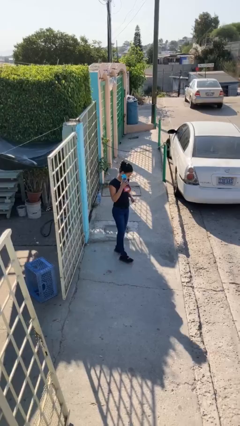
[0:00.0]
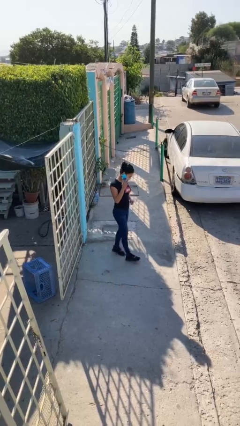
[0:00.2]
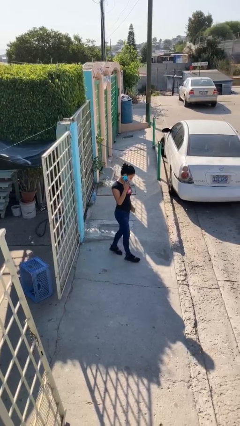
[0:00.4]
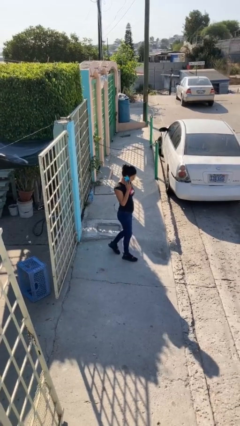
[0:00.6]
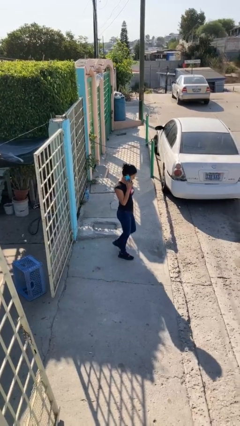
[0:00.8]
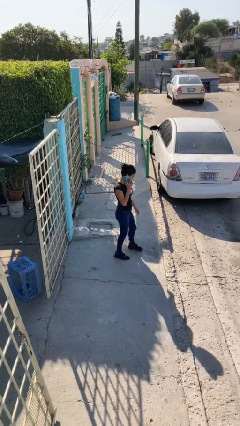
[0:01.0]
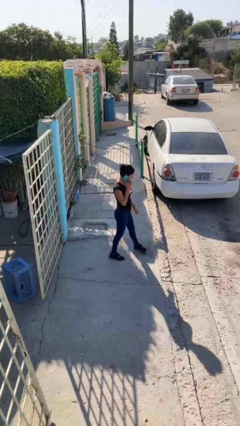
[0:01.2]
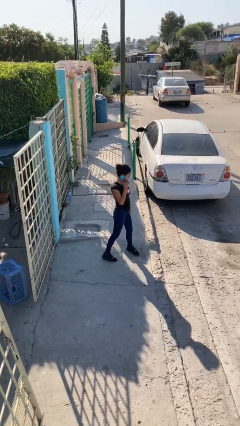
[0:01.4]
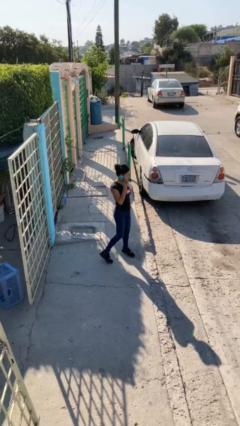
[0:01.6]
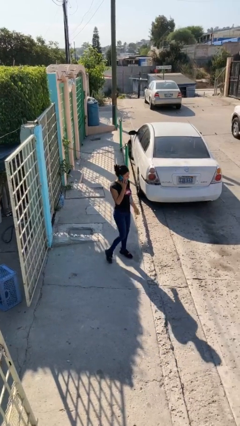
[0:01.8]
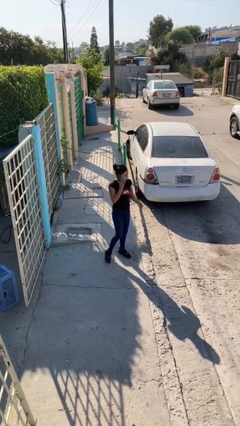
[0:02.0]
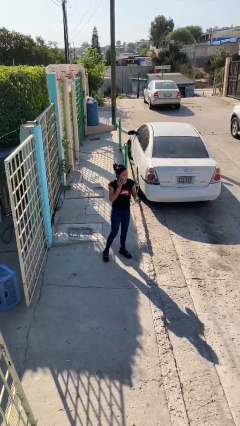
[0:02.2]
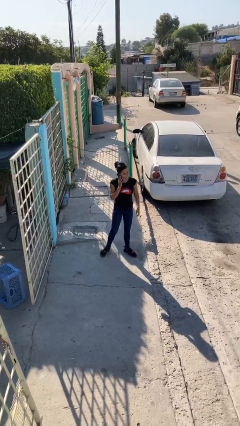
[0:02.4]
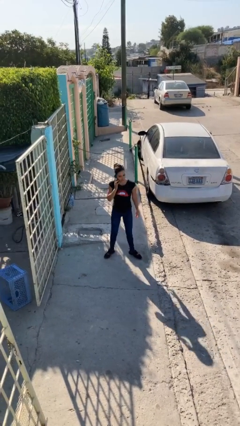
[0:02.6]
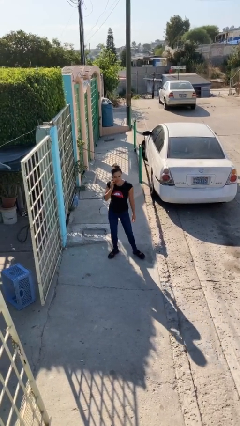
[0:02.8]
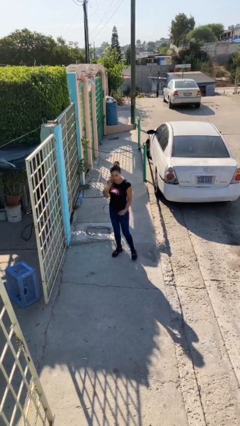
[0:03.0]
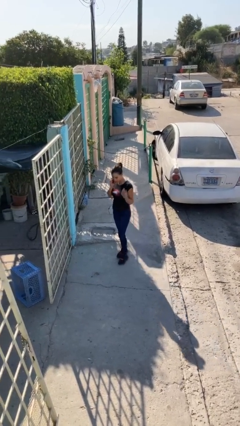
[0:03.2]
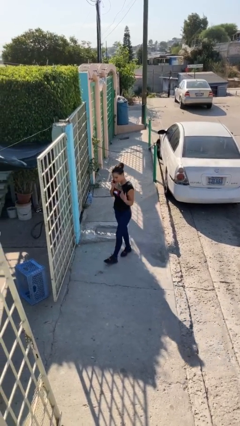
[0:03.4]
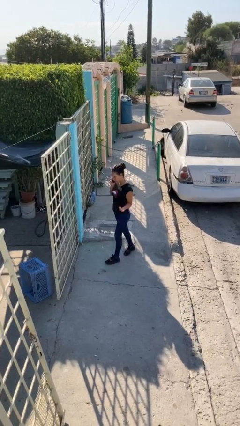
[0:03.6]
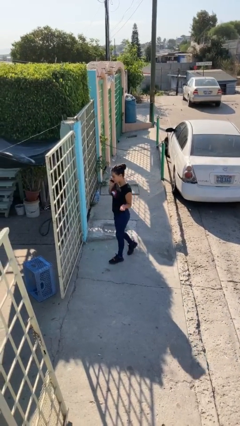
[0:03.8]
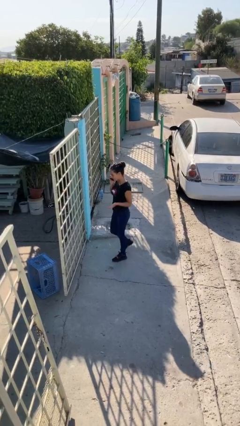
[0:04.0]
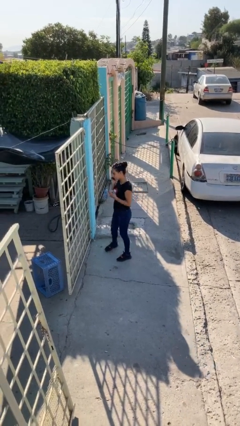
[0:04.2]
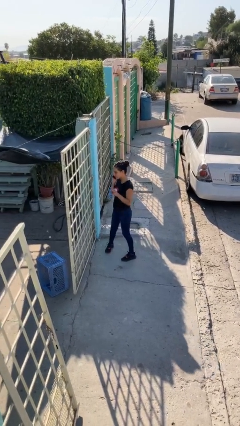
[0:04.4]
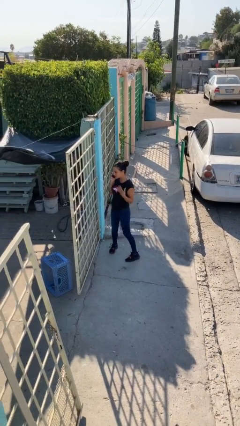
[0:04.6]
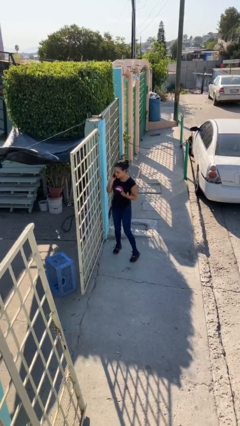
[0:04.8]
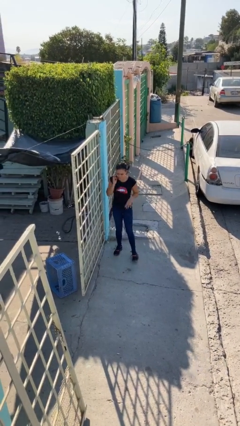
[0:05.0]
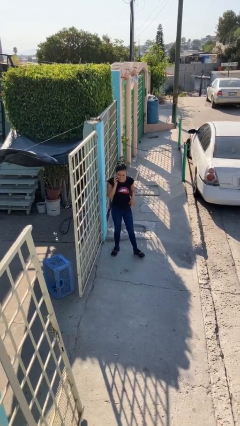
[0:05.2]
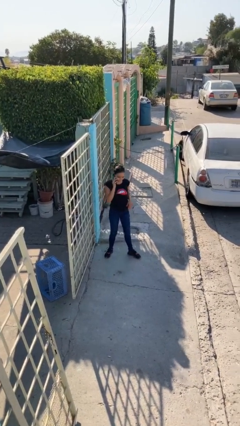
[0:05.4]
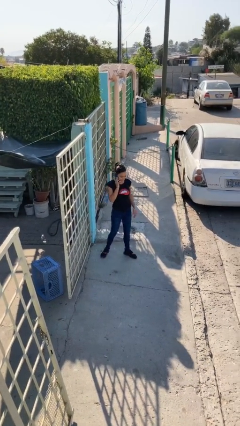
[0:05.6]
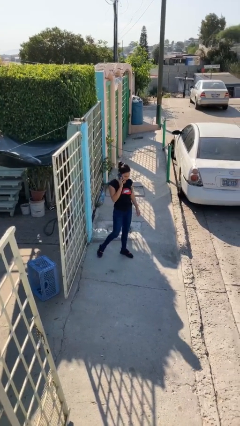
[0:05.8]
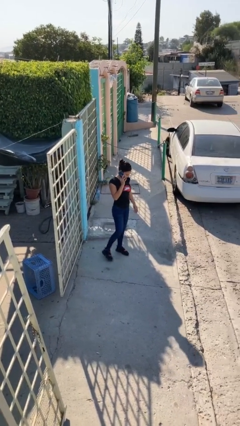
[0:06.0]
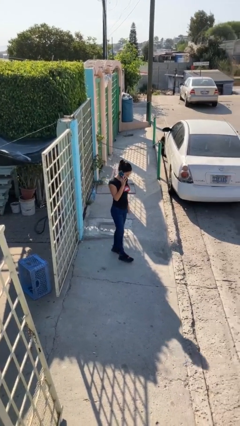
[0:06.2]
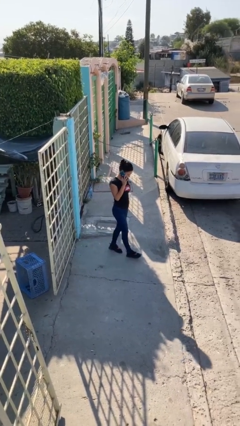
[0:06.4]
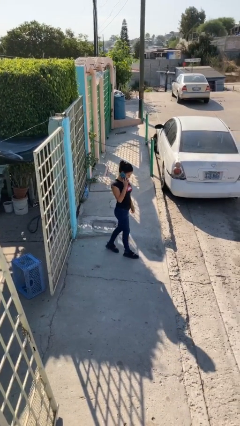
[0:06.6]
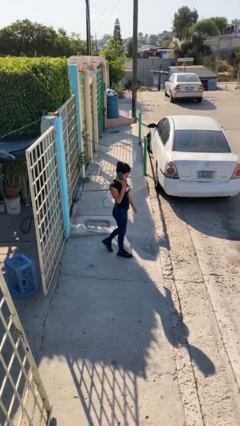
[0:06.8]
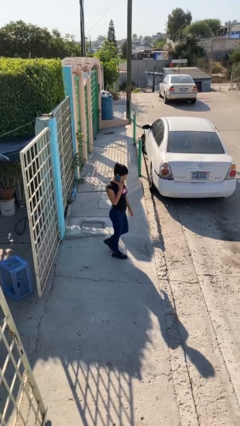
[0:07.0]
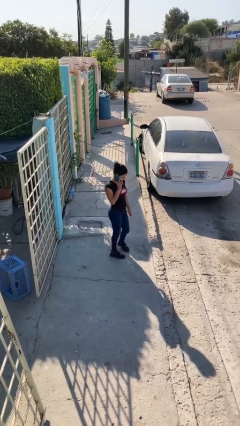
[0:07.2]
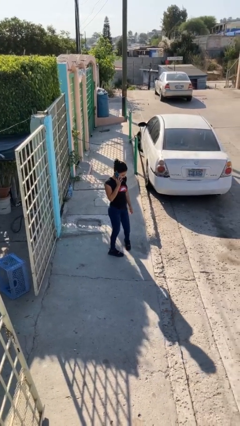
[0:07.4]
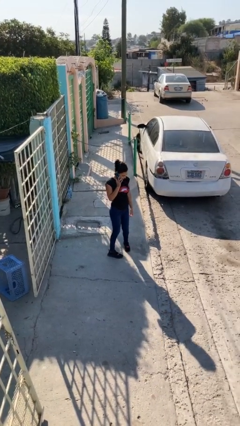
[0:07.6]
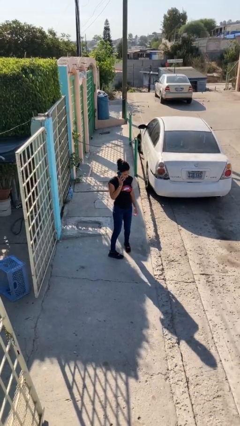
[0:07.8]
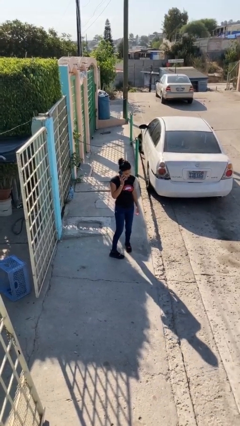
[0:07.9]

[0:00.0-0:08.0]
person talks on phone

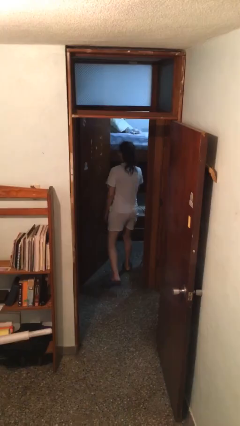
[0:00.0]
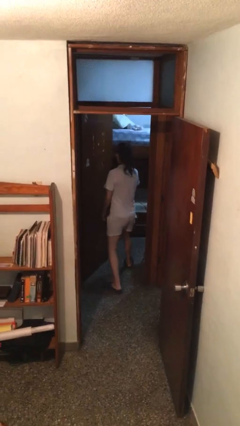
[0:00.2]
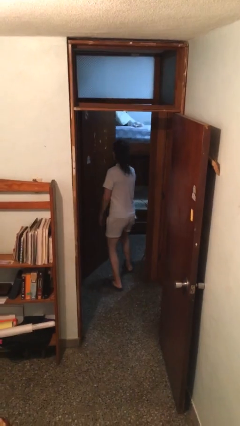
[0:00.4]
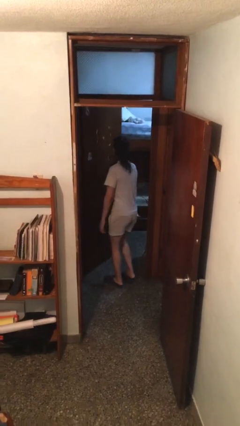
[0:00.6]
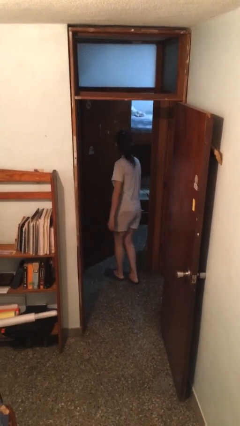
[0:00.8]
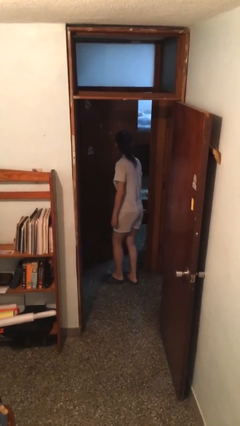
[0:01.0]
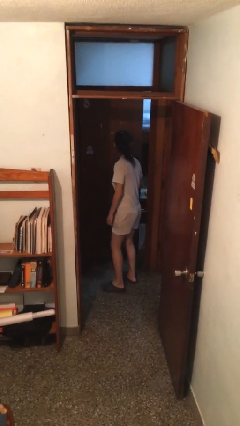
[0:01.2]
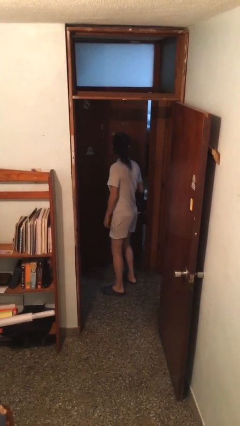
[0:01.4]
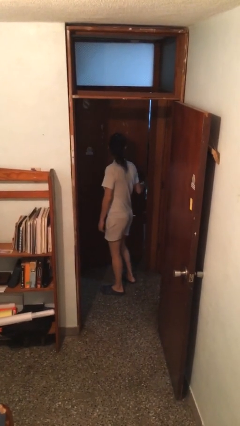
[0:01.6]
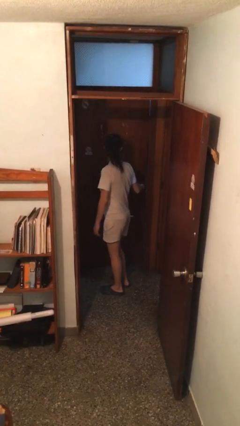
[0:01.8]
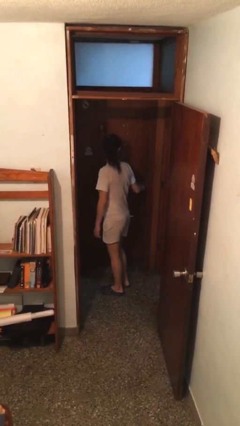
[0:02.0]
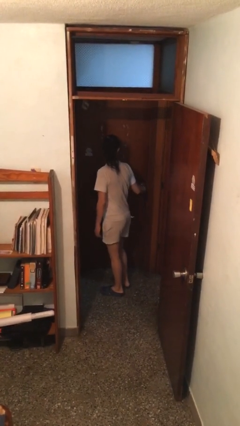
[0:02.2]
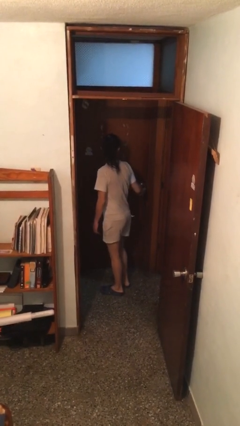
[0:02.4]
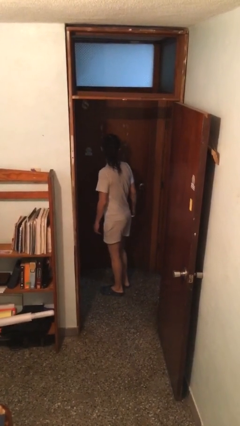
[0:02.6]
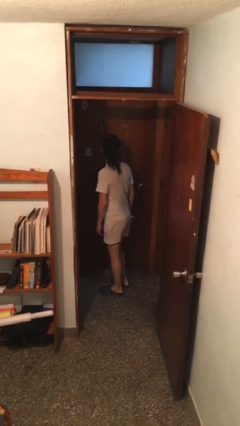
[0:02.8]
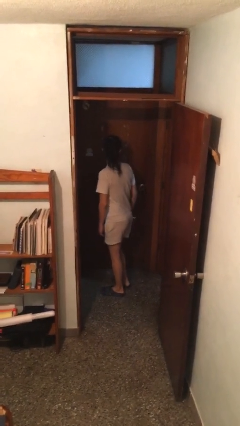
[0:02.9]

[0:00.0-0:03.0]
person closes facility door

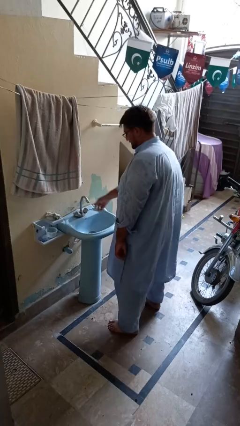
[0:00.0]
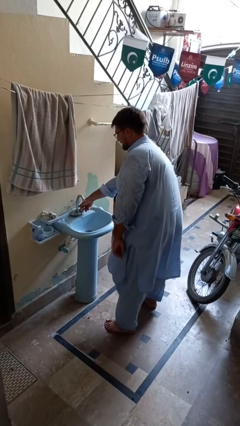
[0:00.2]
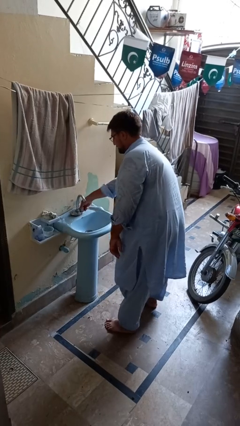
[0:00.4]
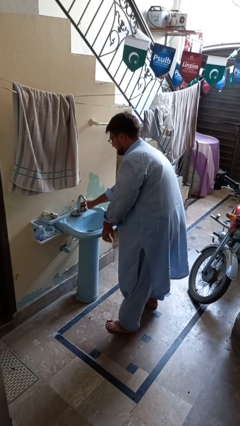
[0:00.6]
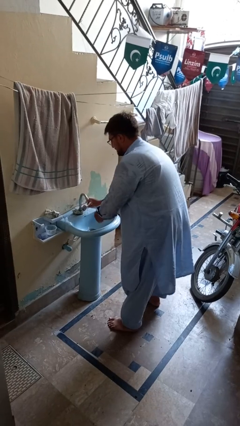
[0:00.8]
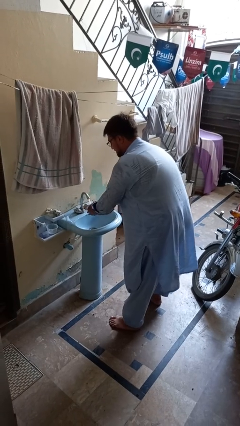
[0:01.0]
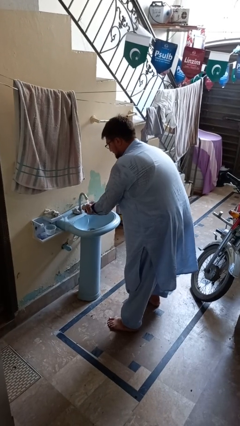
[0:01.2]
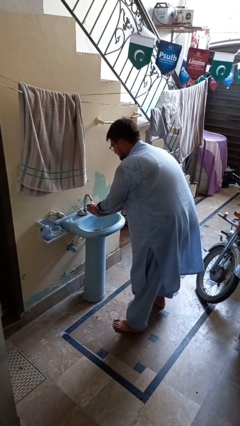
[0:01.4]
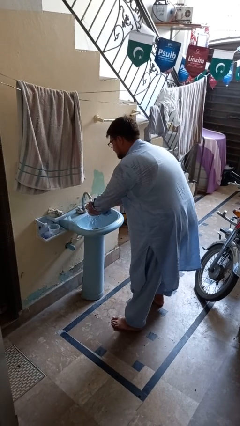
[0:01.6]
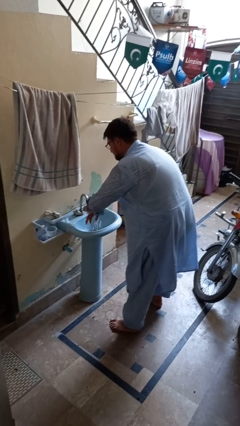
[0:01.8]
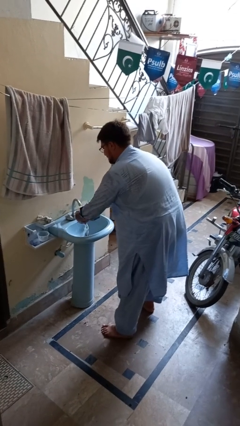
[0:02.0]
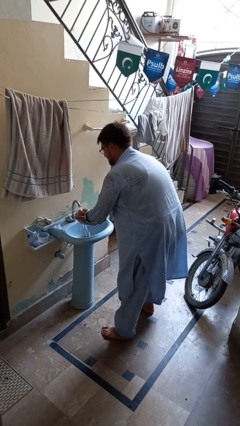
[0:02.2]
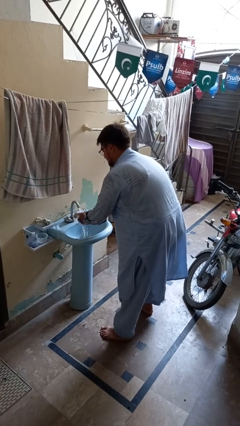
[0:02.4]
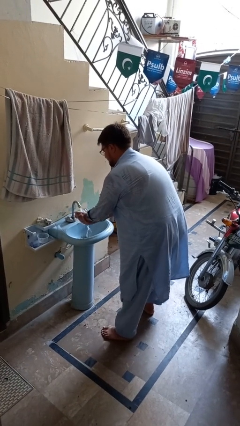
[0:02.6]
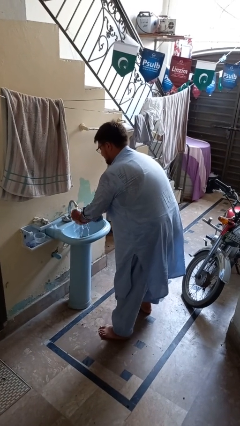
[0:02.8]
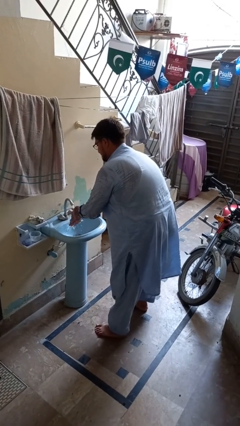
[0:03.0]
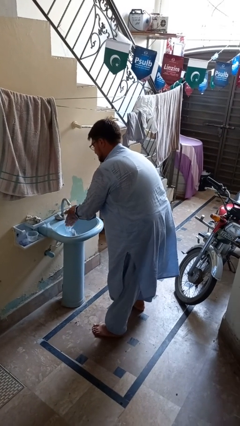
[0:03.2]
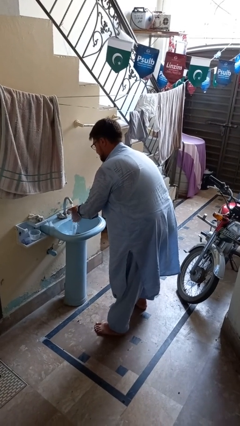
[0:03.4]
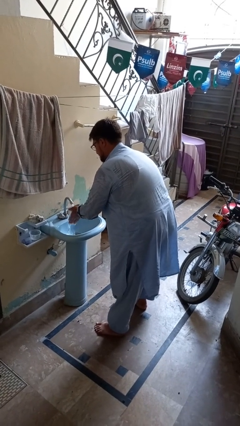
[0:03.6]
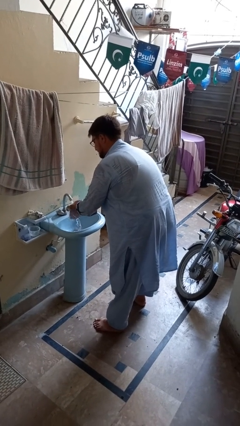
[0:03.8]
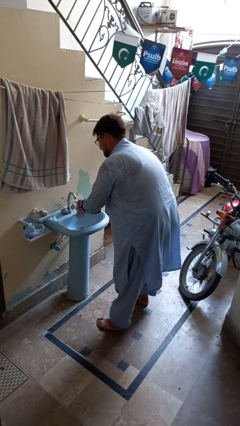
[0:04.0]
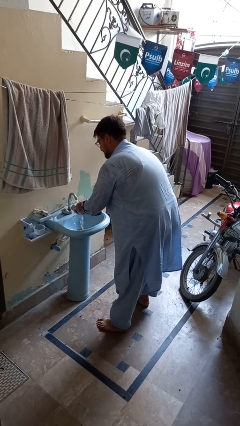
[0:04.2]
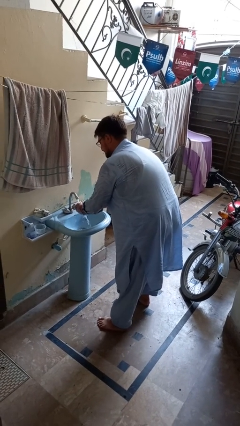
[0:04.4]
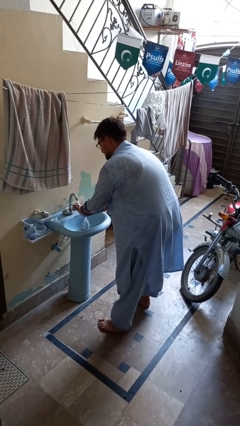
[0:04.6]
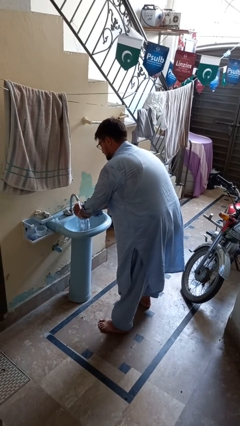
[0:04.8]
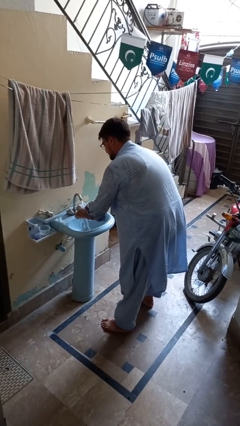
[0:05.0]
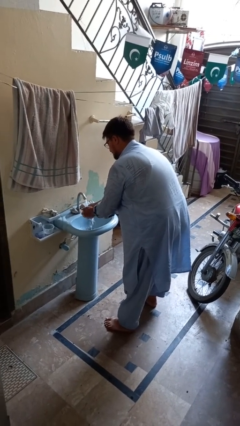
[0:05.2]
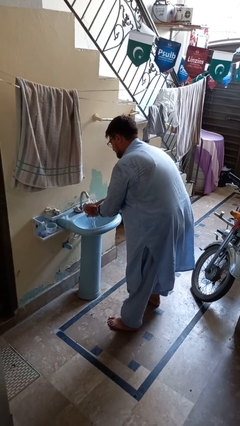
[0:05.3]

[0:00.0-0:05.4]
person washes hands

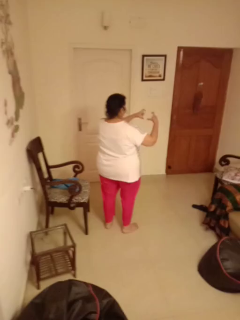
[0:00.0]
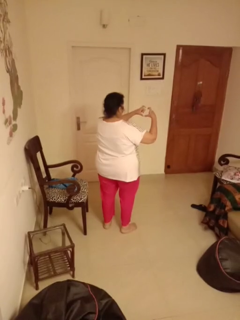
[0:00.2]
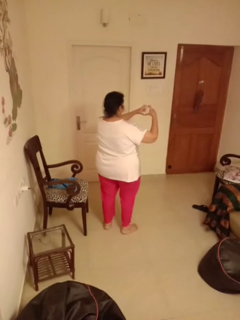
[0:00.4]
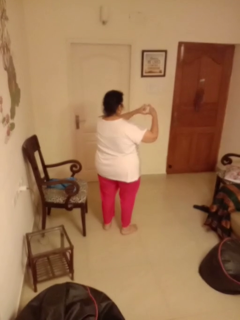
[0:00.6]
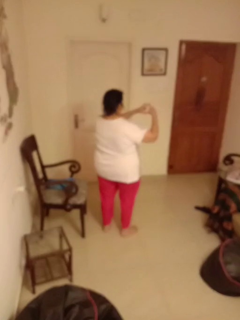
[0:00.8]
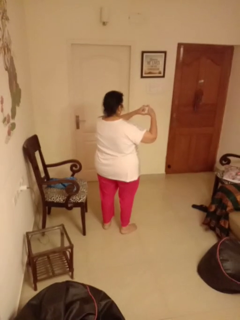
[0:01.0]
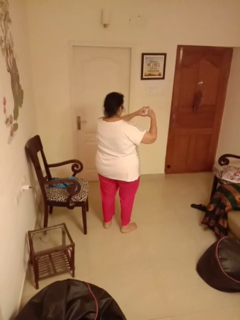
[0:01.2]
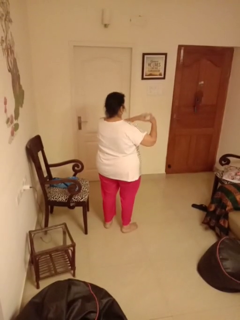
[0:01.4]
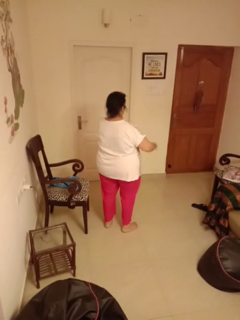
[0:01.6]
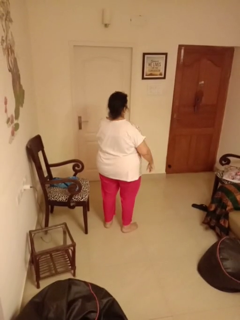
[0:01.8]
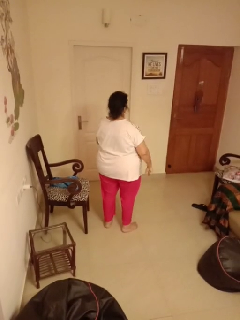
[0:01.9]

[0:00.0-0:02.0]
person gestures heart
